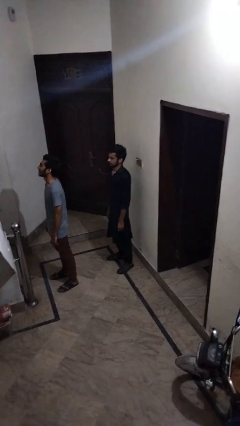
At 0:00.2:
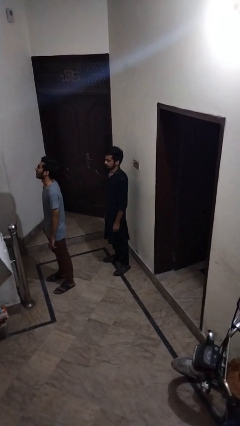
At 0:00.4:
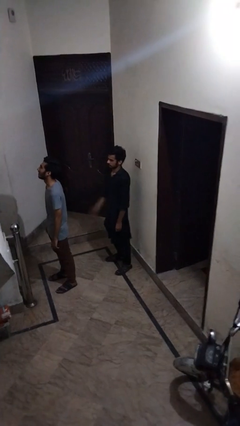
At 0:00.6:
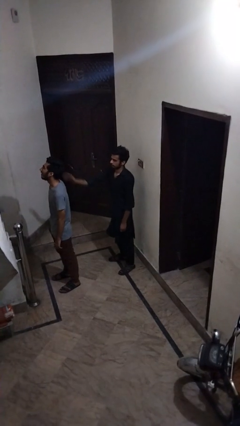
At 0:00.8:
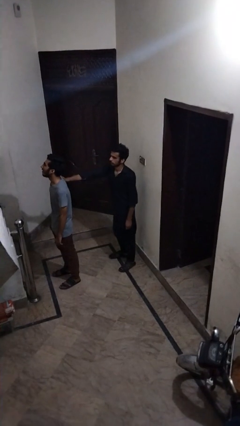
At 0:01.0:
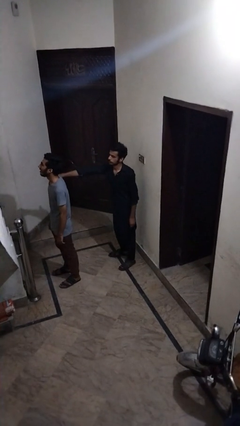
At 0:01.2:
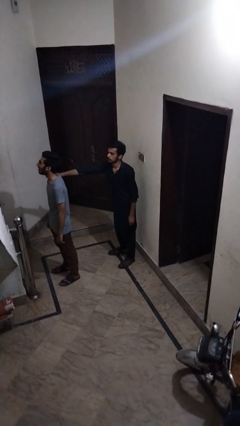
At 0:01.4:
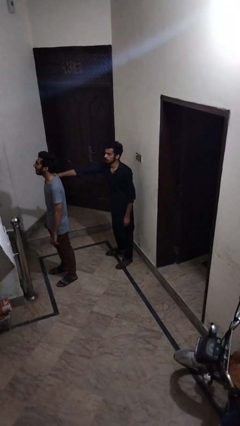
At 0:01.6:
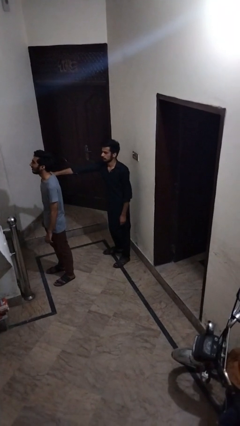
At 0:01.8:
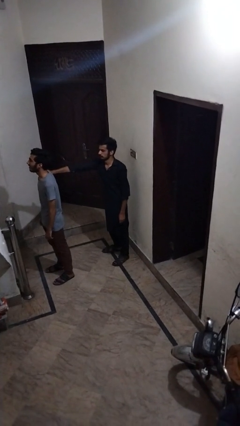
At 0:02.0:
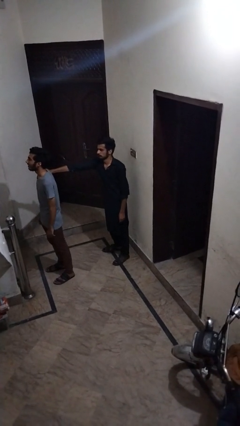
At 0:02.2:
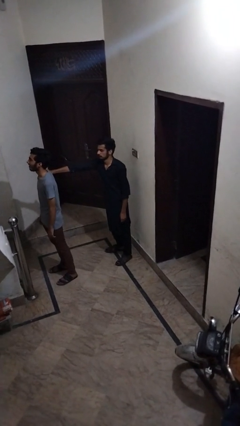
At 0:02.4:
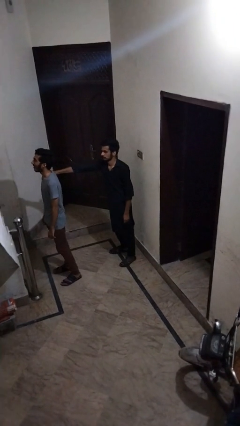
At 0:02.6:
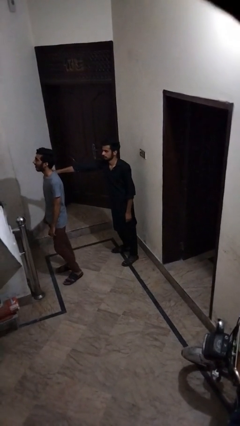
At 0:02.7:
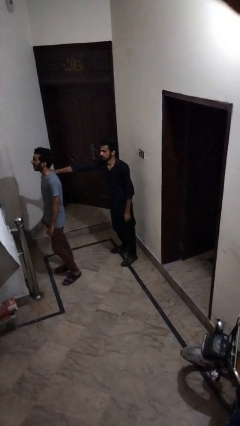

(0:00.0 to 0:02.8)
person grabs person by shoulder

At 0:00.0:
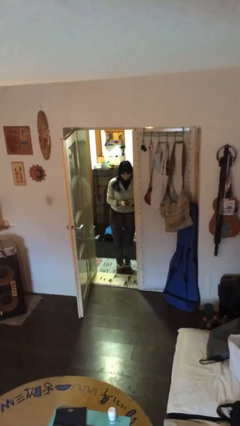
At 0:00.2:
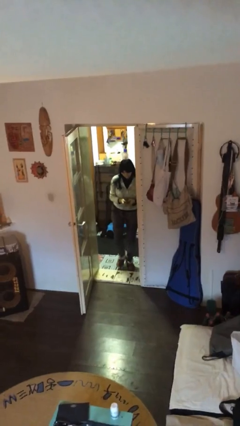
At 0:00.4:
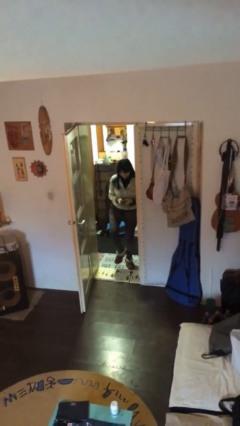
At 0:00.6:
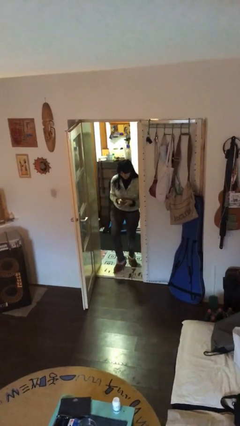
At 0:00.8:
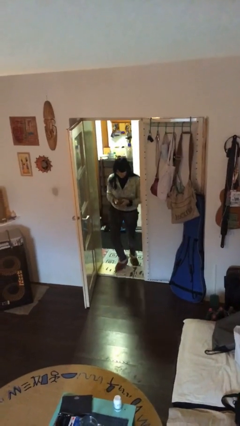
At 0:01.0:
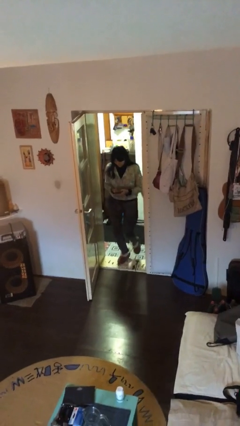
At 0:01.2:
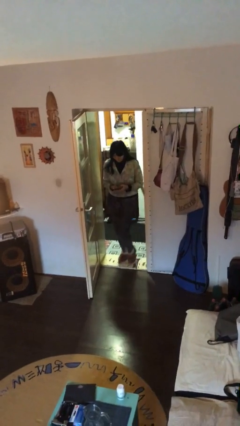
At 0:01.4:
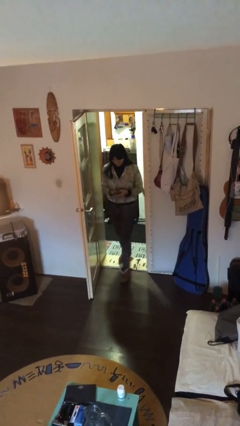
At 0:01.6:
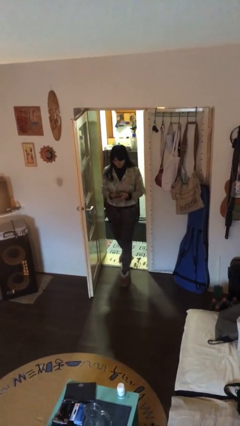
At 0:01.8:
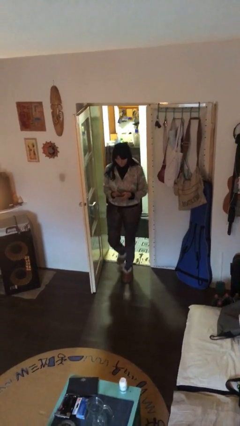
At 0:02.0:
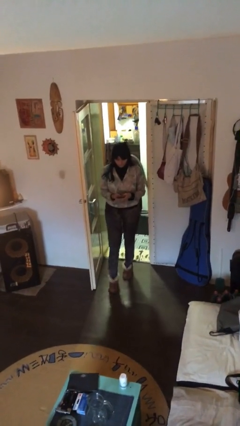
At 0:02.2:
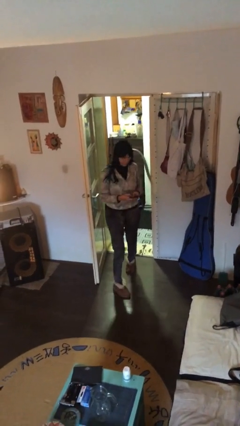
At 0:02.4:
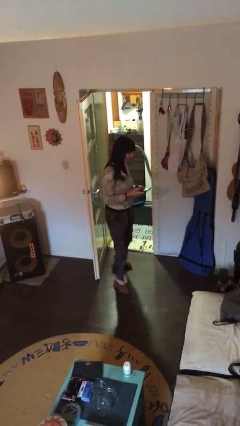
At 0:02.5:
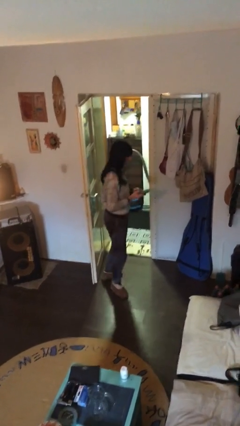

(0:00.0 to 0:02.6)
person enters scene through structure

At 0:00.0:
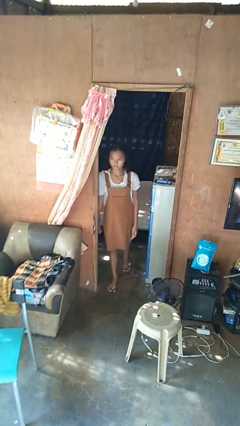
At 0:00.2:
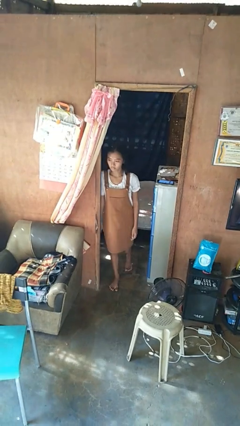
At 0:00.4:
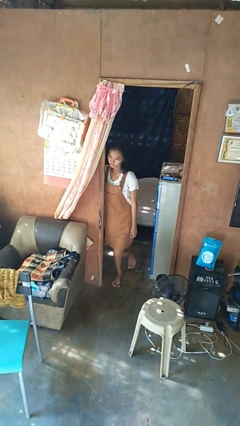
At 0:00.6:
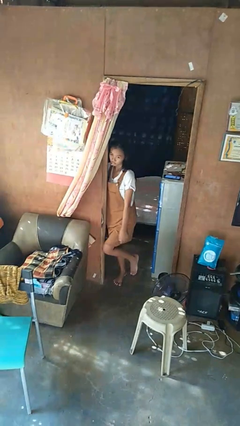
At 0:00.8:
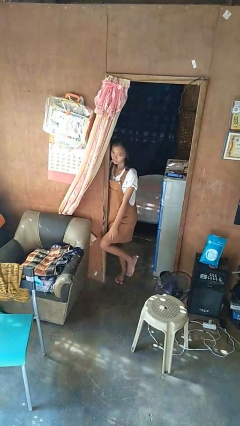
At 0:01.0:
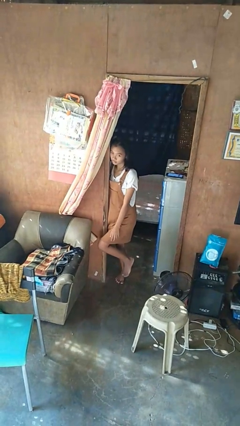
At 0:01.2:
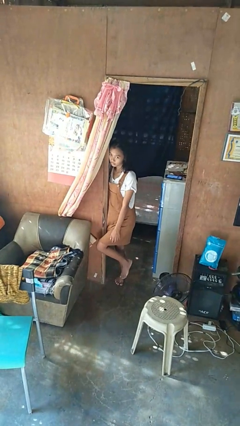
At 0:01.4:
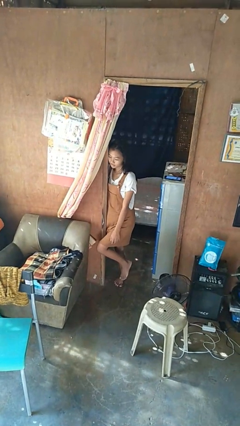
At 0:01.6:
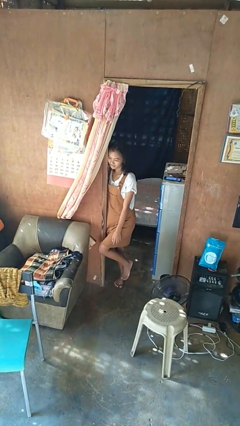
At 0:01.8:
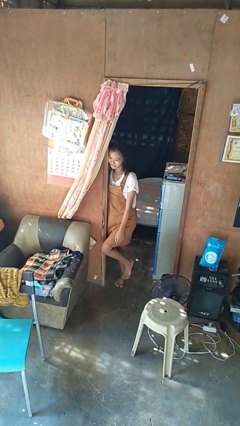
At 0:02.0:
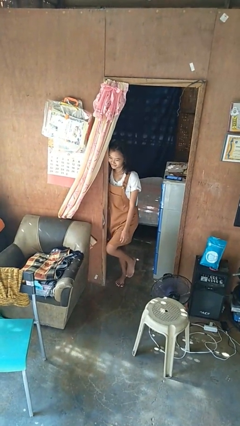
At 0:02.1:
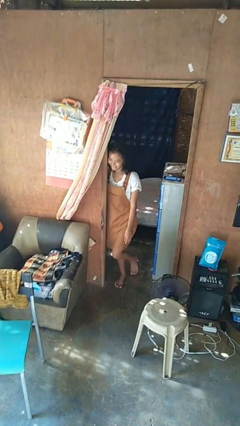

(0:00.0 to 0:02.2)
person bumps into wall

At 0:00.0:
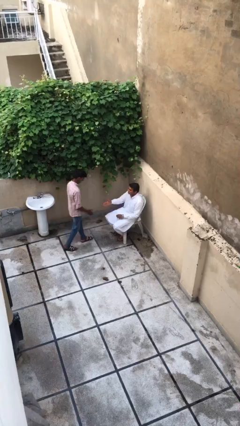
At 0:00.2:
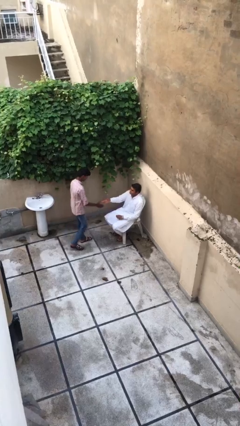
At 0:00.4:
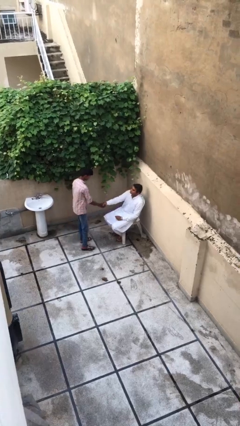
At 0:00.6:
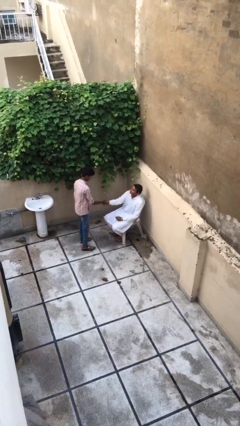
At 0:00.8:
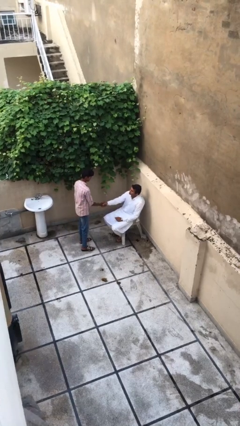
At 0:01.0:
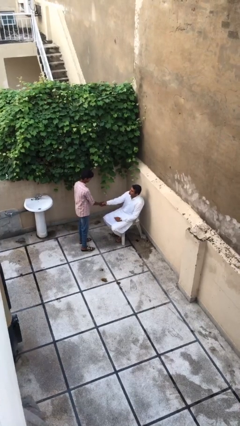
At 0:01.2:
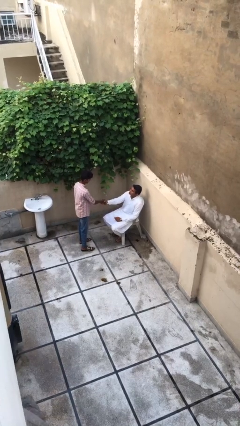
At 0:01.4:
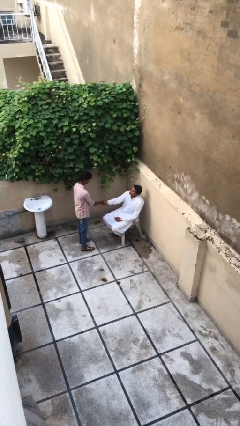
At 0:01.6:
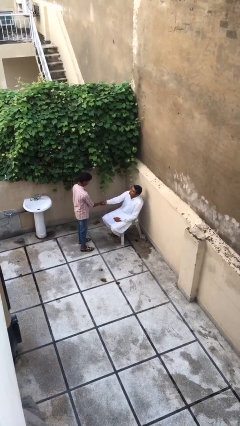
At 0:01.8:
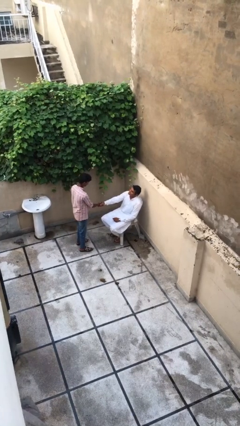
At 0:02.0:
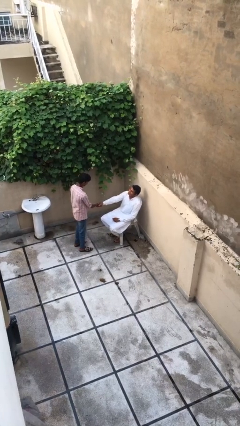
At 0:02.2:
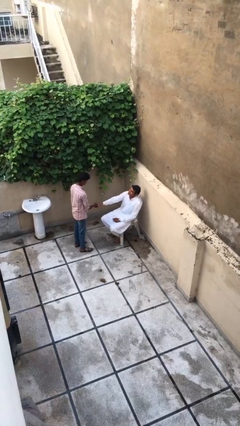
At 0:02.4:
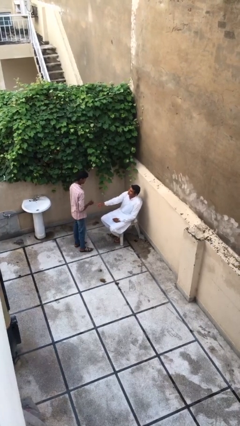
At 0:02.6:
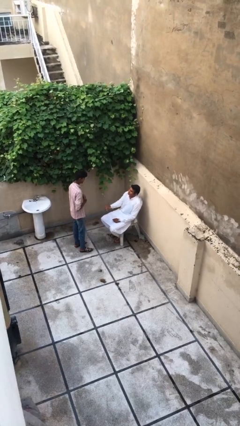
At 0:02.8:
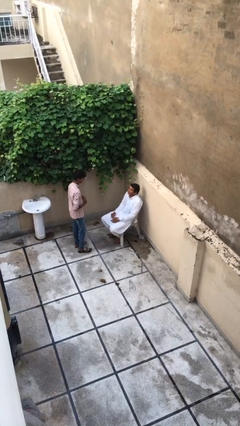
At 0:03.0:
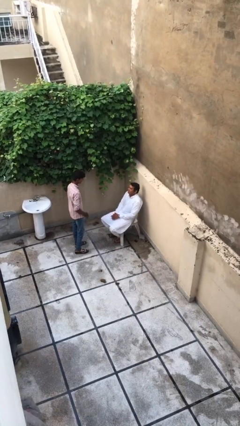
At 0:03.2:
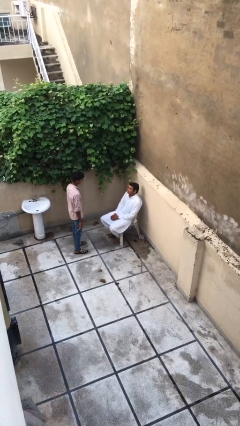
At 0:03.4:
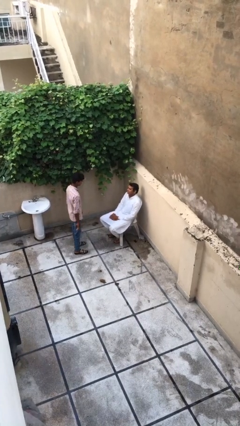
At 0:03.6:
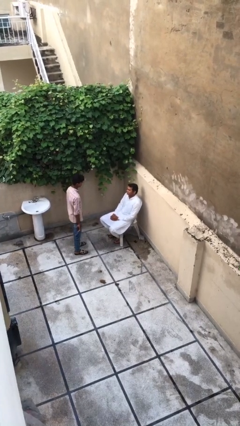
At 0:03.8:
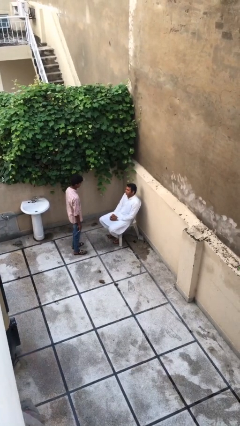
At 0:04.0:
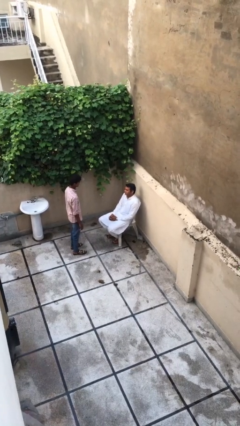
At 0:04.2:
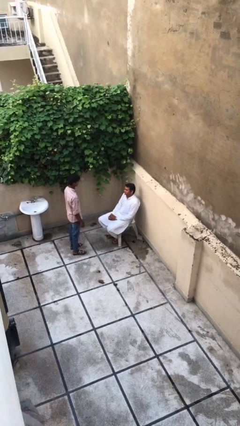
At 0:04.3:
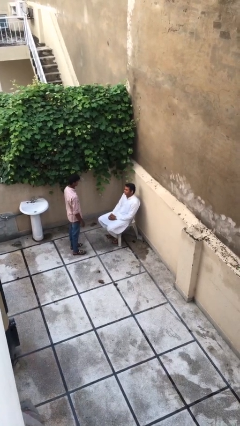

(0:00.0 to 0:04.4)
person shakes hand

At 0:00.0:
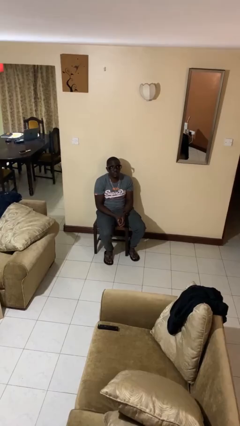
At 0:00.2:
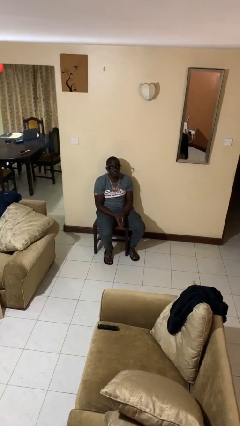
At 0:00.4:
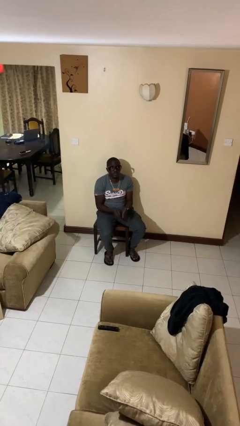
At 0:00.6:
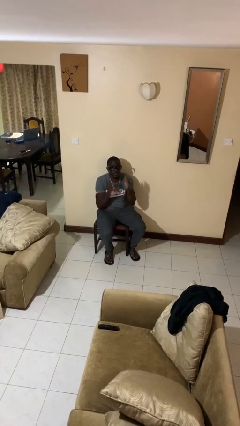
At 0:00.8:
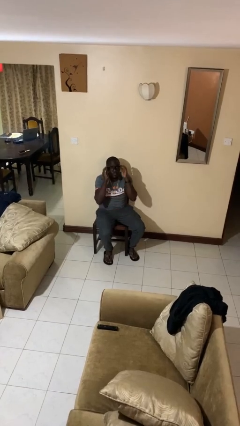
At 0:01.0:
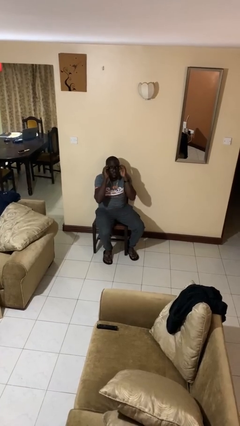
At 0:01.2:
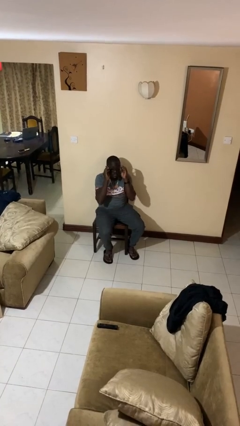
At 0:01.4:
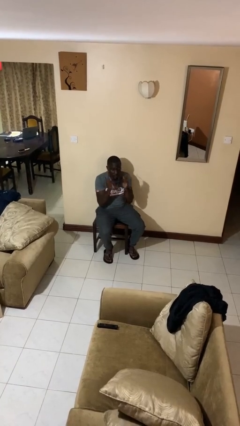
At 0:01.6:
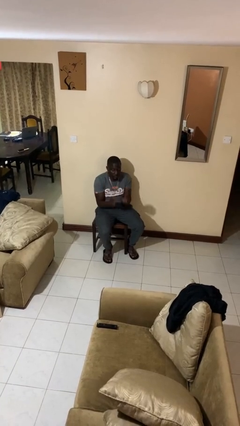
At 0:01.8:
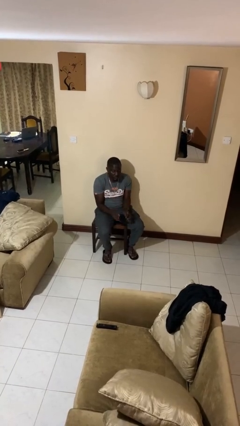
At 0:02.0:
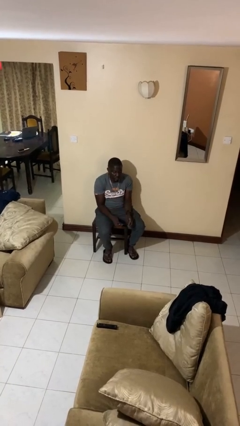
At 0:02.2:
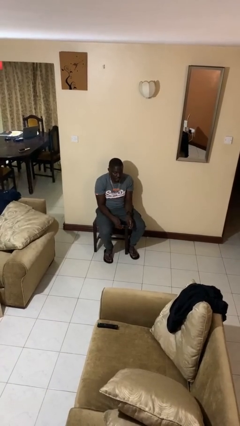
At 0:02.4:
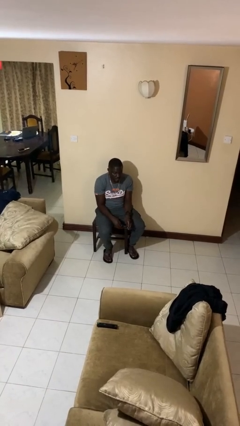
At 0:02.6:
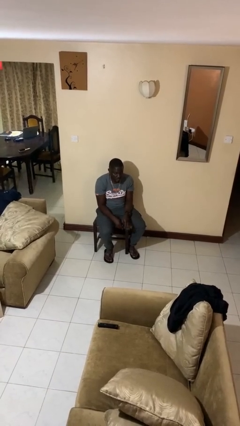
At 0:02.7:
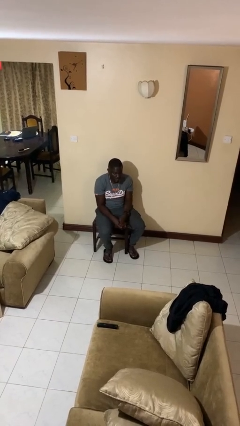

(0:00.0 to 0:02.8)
person takes off glasses

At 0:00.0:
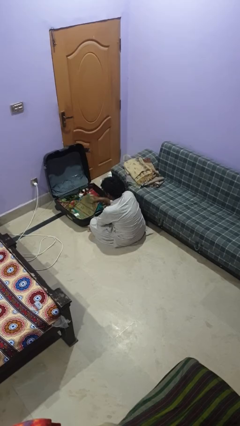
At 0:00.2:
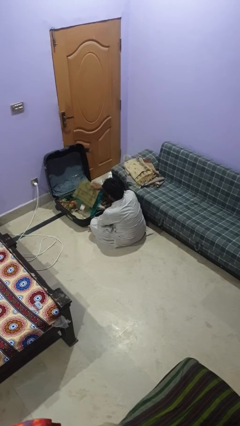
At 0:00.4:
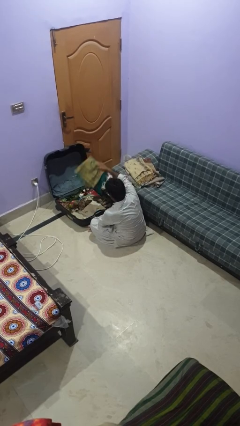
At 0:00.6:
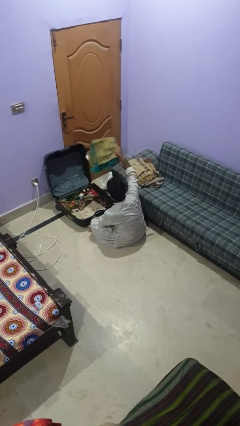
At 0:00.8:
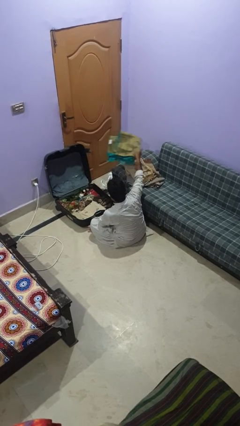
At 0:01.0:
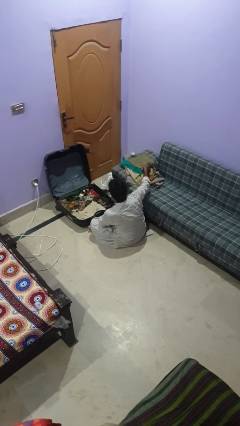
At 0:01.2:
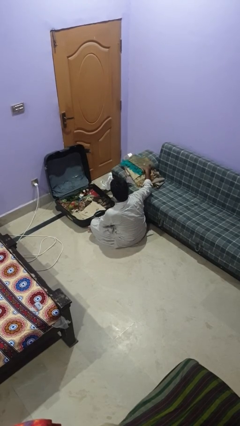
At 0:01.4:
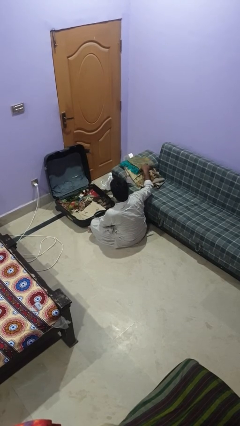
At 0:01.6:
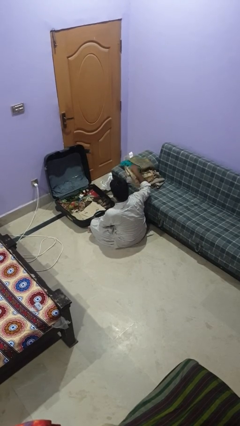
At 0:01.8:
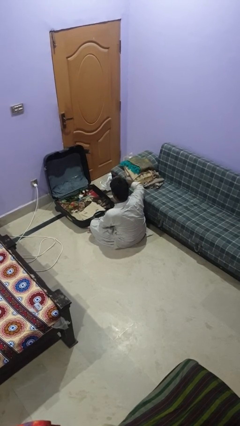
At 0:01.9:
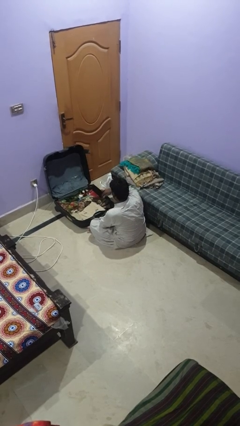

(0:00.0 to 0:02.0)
person unloads clothes from suitcase

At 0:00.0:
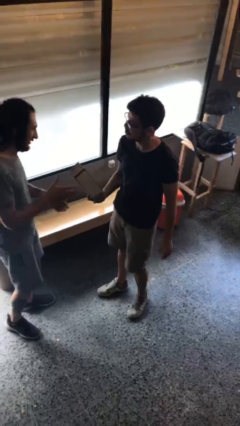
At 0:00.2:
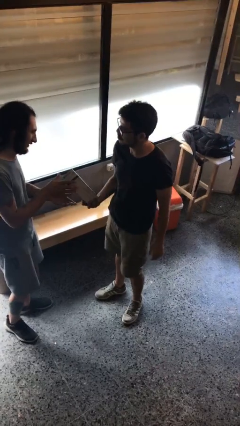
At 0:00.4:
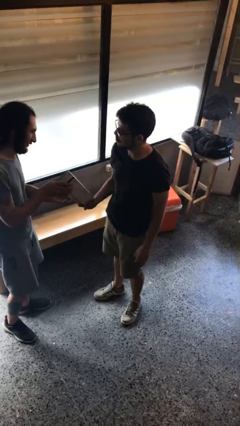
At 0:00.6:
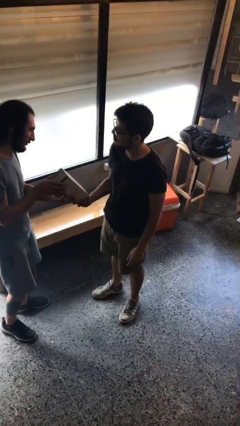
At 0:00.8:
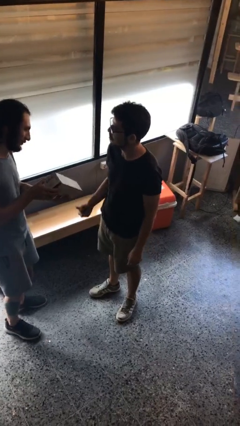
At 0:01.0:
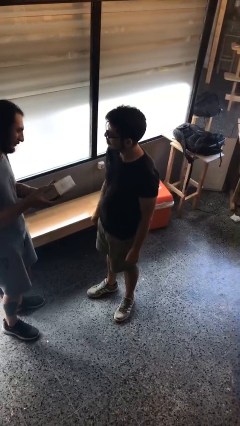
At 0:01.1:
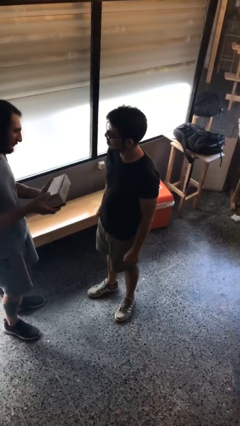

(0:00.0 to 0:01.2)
person transfers object to person
